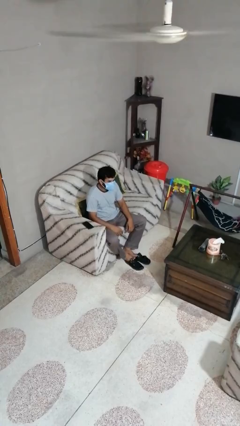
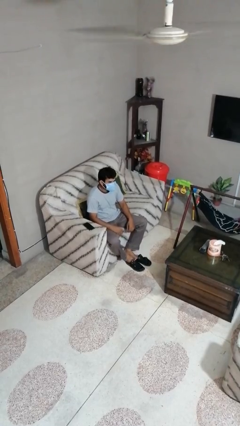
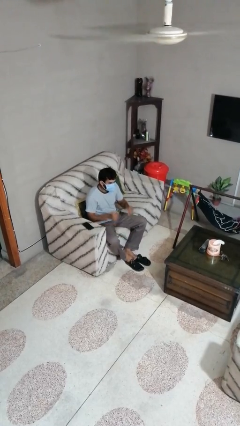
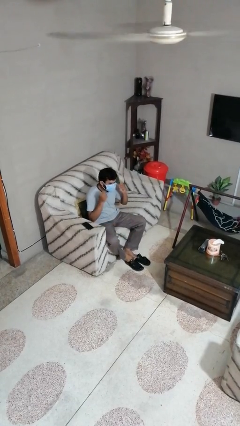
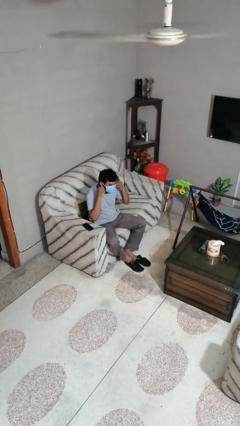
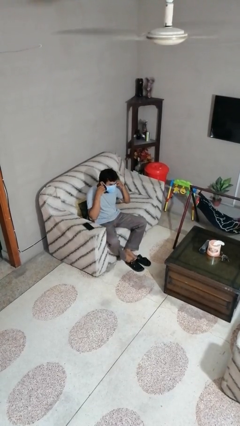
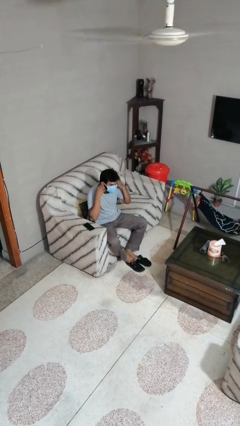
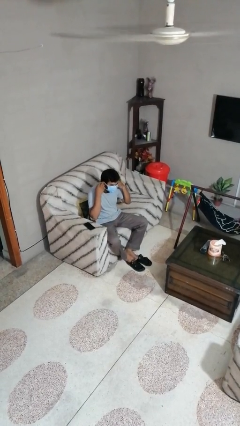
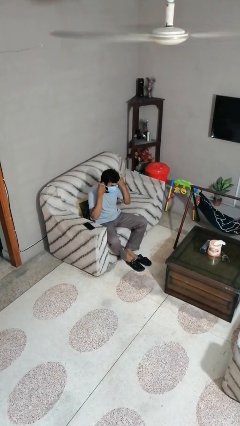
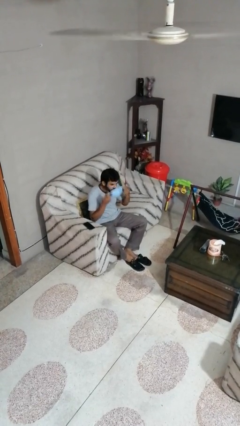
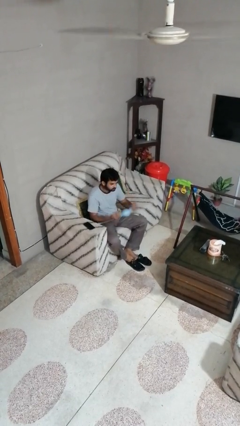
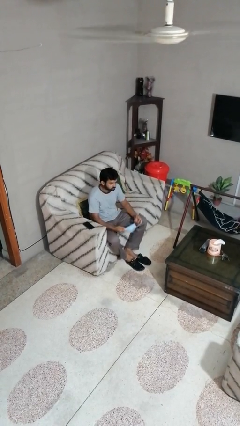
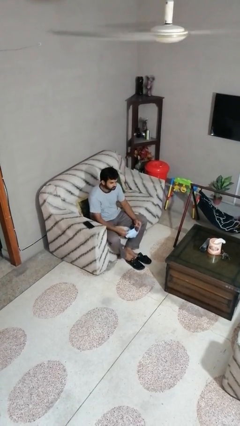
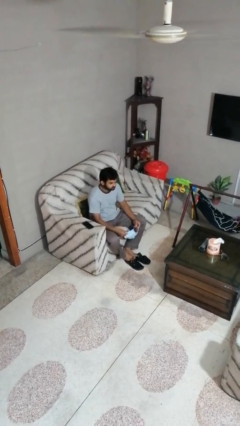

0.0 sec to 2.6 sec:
person takes off facemask

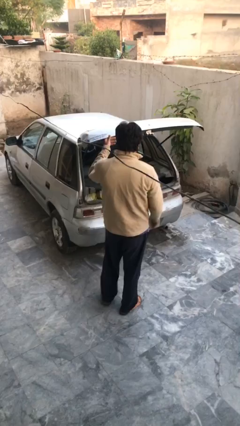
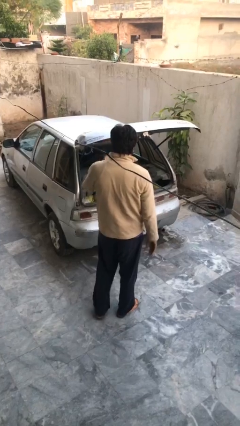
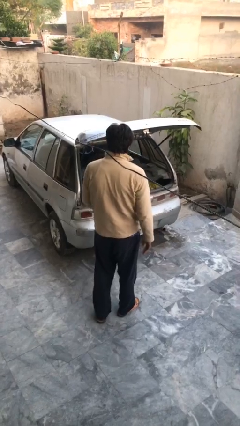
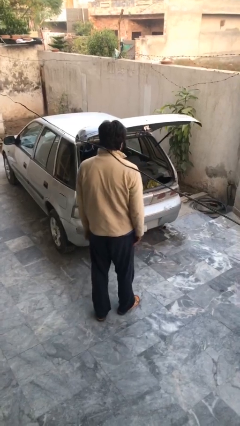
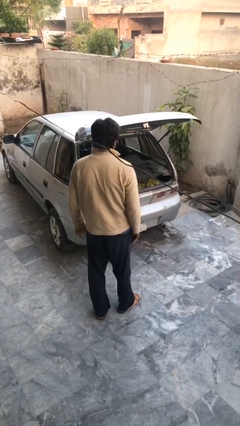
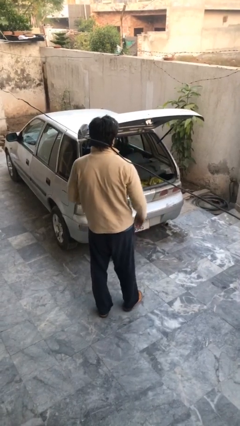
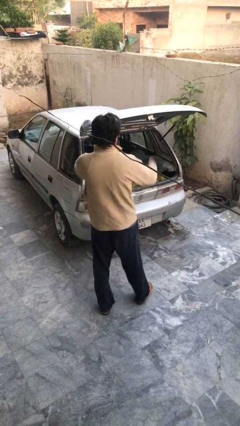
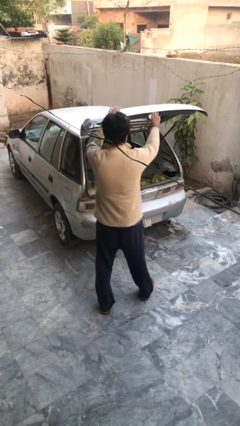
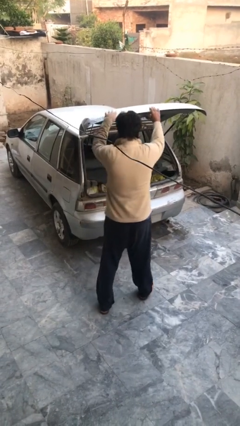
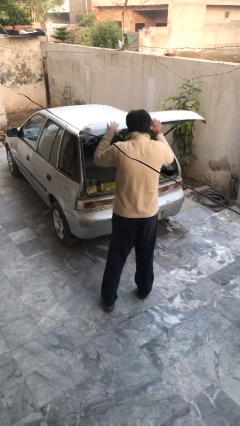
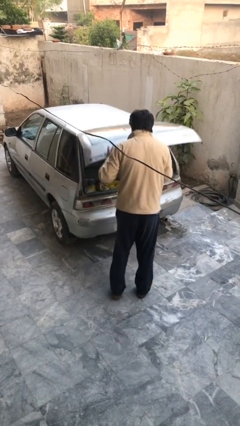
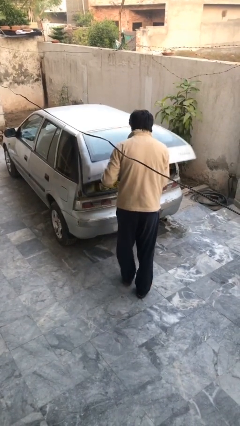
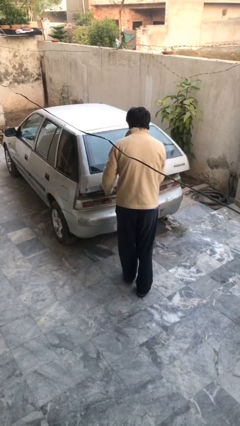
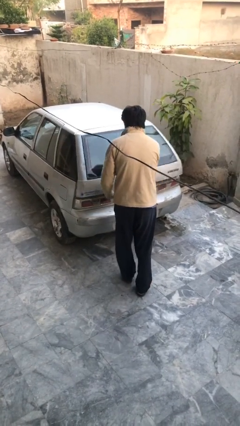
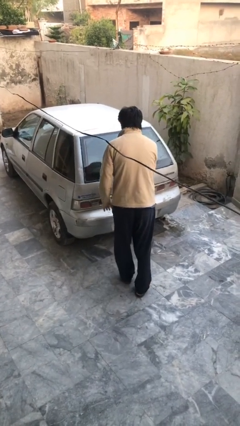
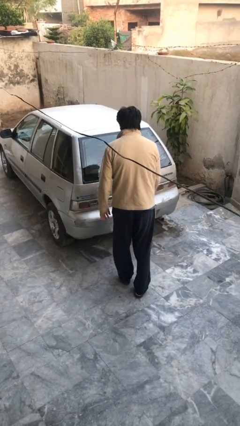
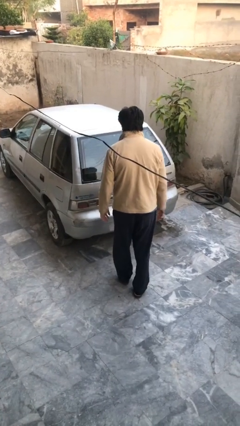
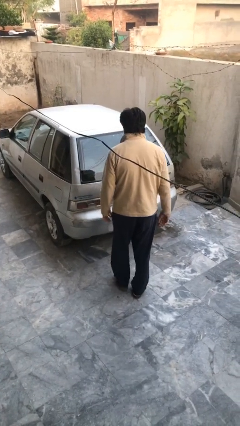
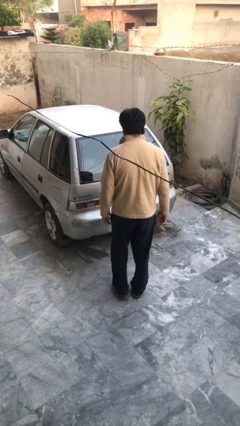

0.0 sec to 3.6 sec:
person closes car trunk

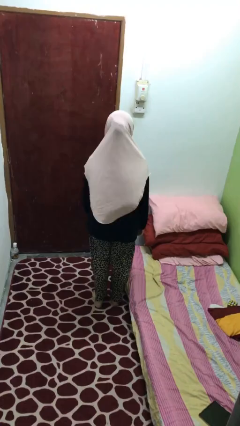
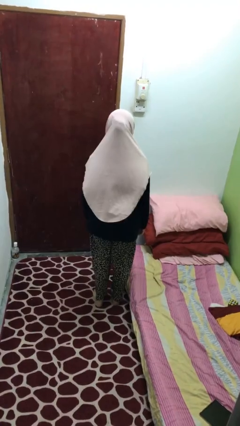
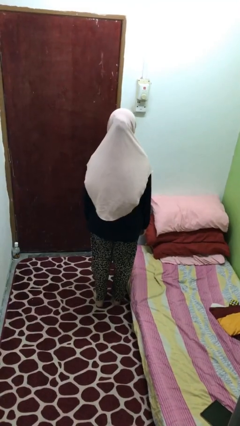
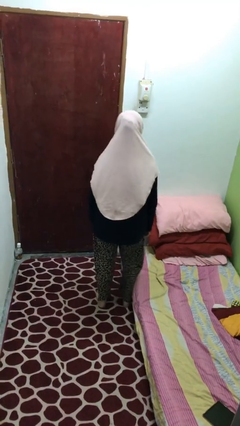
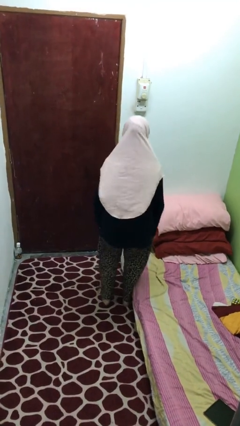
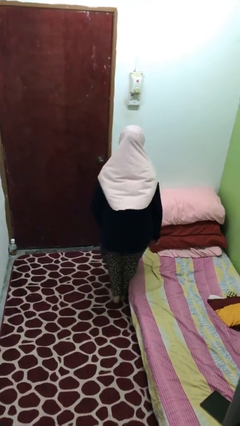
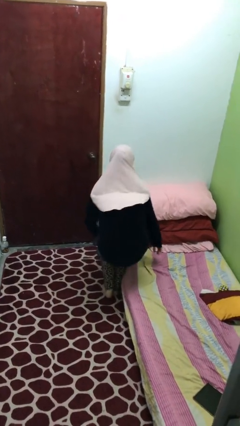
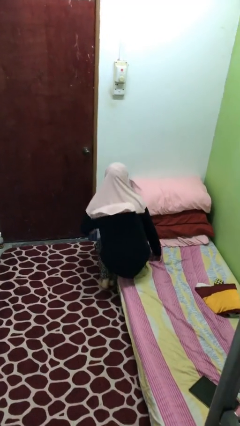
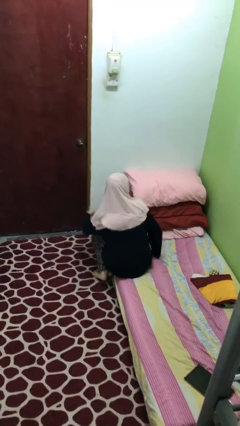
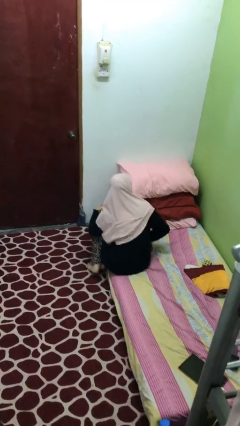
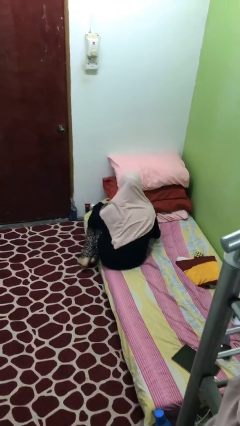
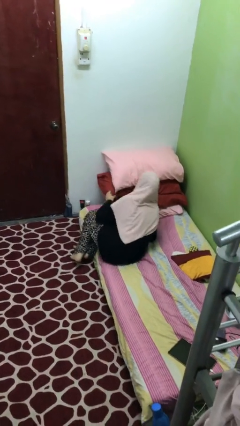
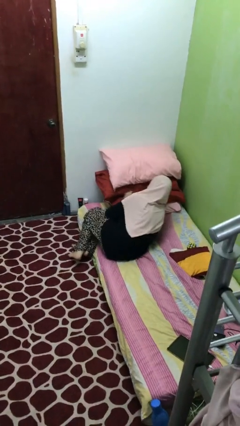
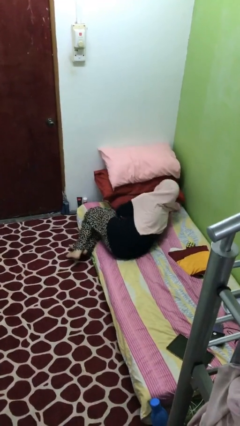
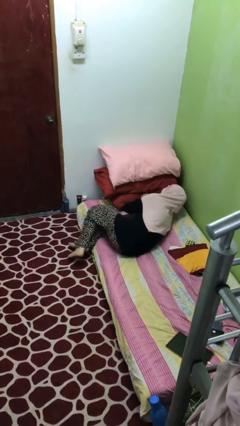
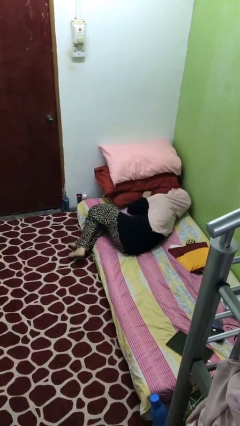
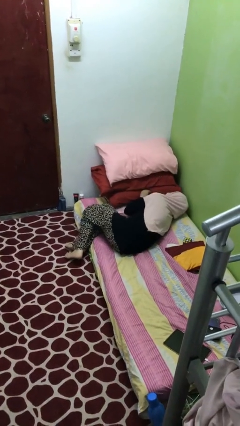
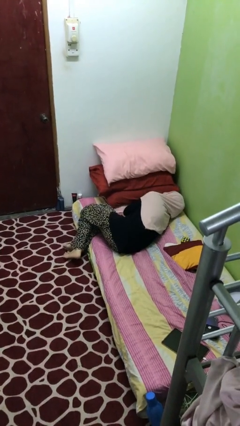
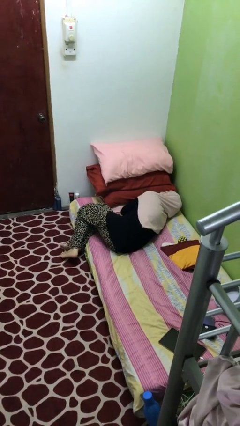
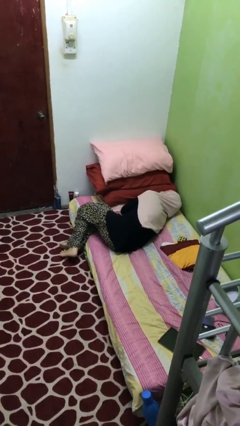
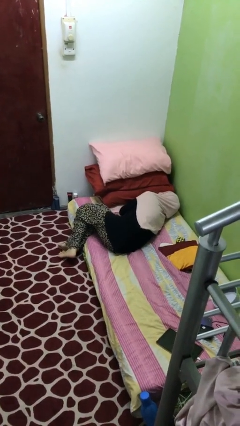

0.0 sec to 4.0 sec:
person lies down on bed

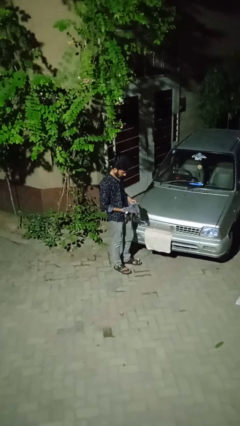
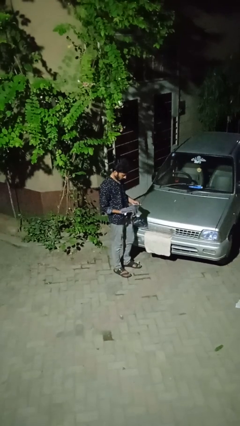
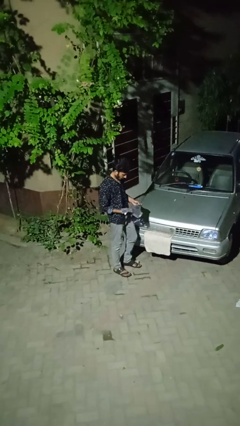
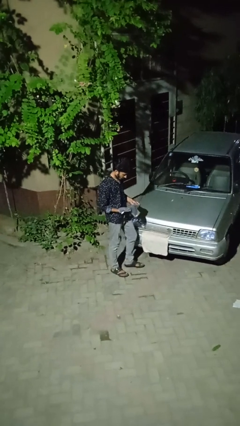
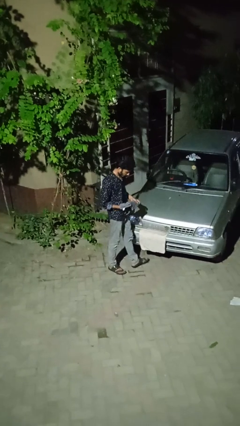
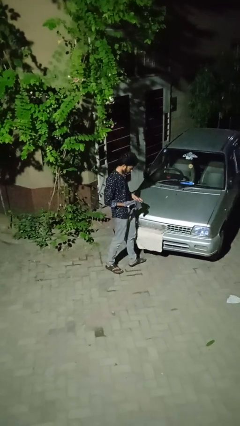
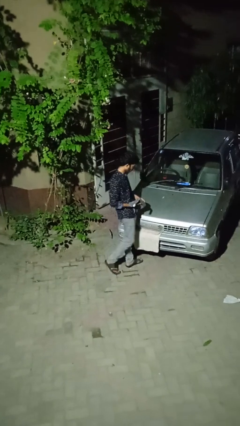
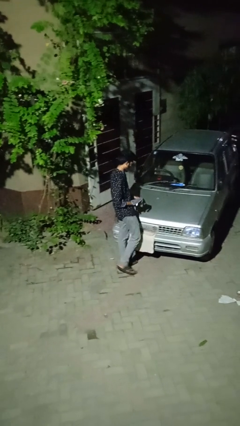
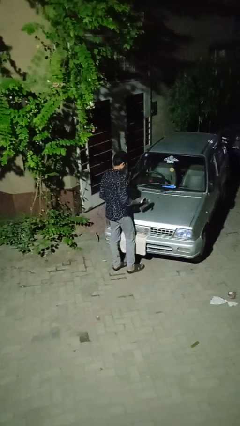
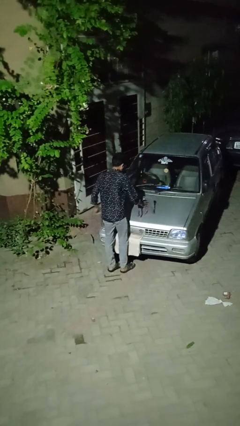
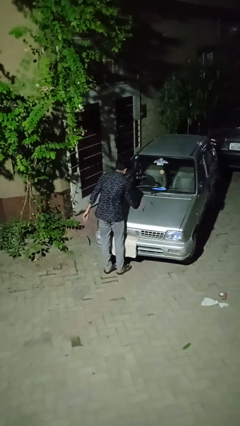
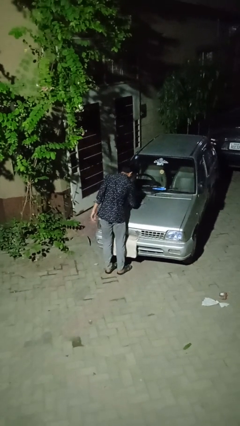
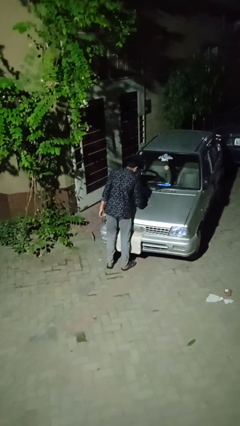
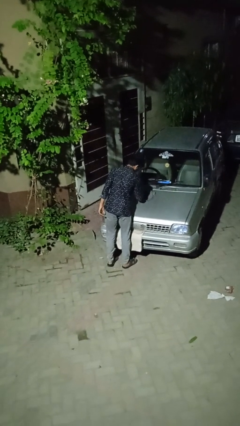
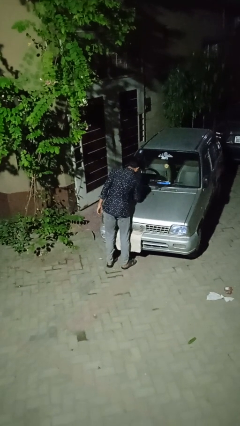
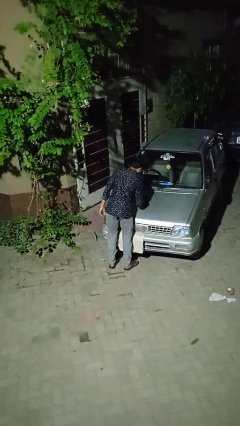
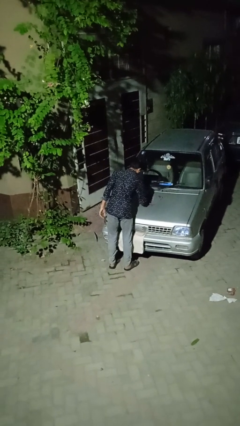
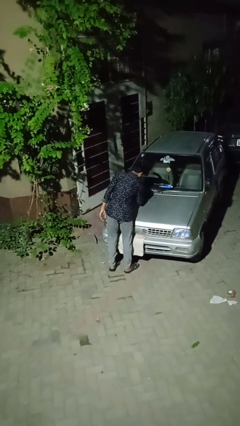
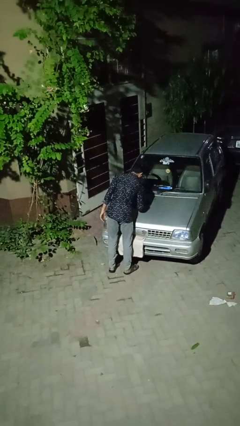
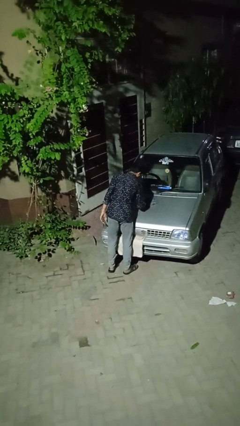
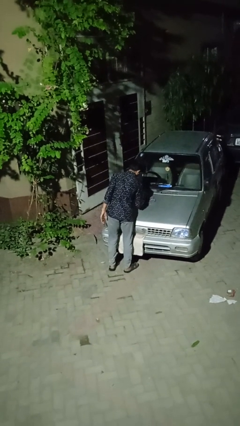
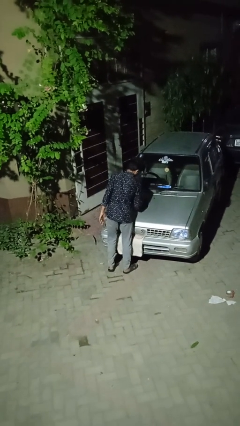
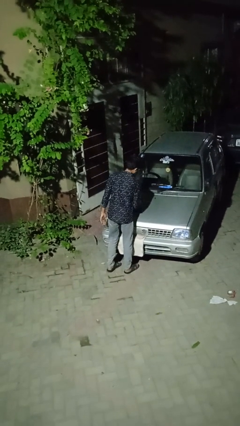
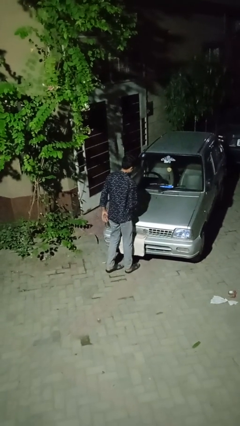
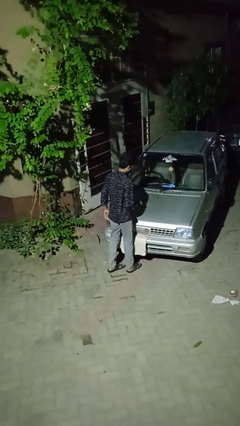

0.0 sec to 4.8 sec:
person polishes car with rag

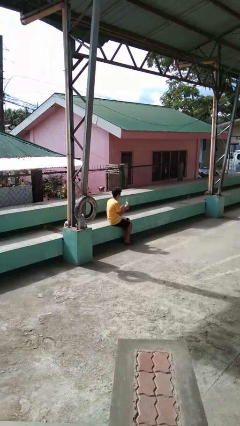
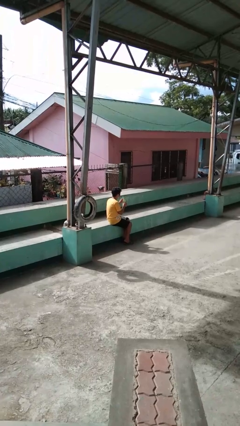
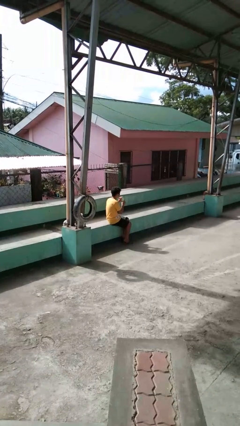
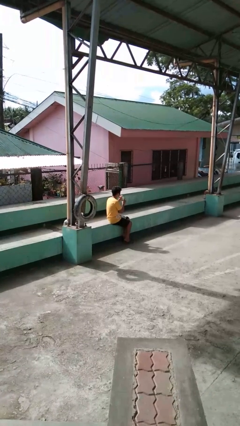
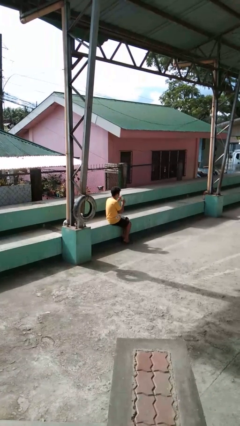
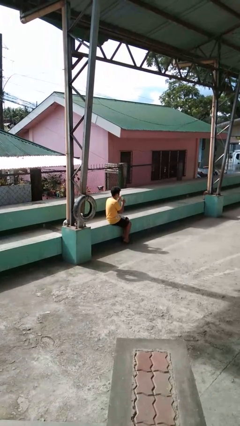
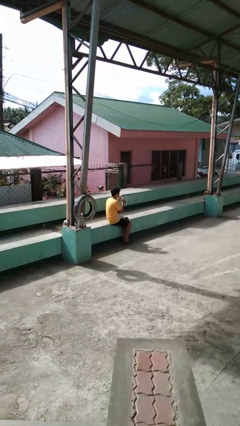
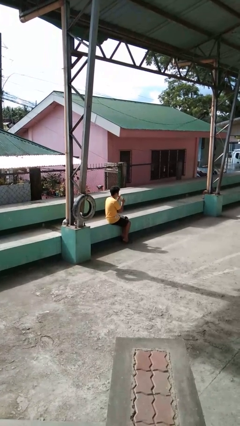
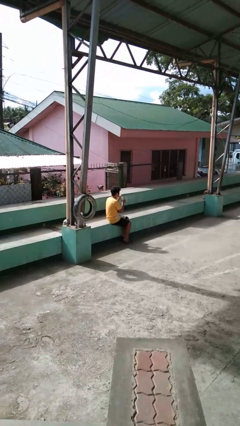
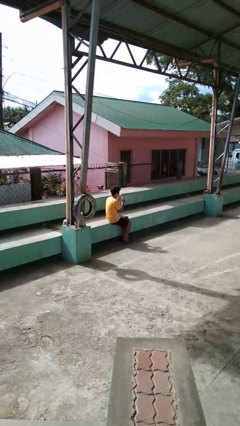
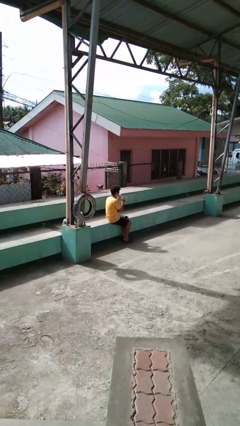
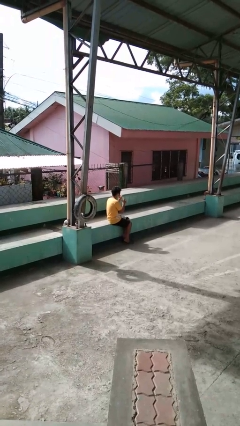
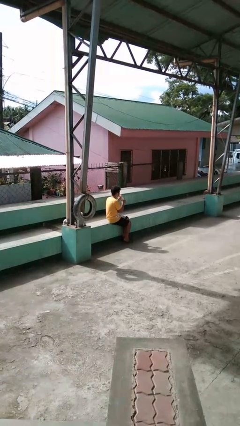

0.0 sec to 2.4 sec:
person drinks from straw
